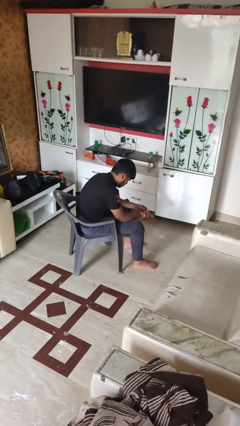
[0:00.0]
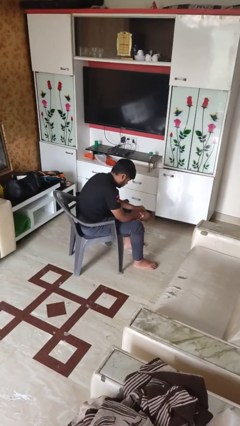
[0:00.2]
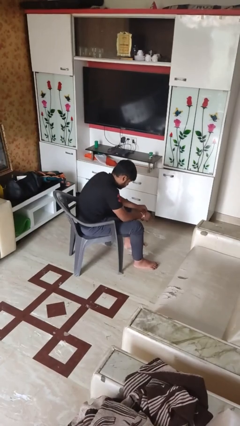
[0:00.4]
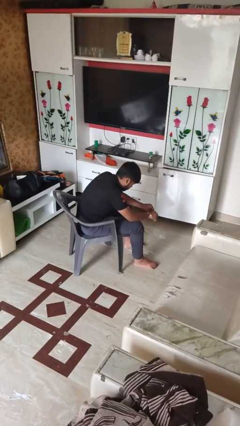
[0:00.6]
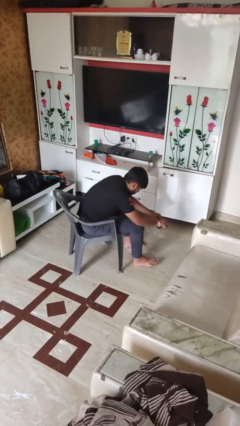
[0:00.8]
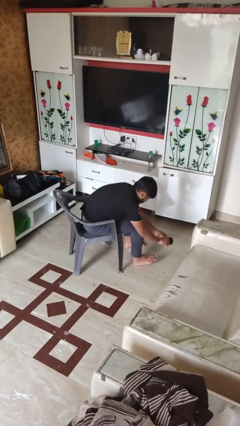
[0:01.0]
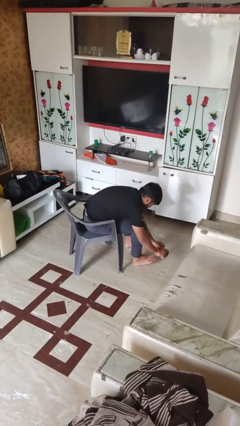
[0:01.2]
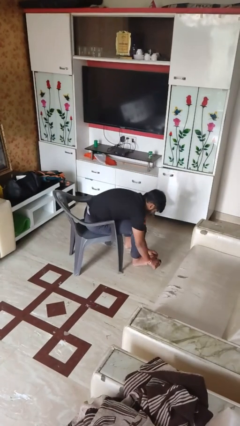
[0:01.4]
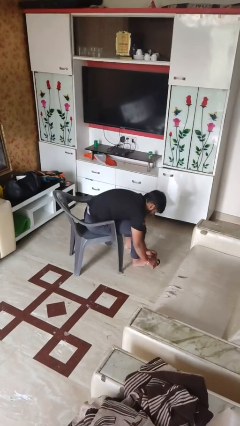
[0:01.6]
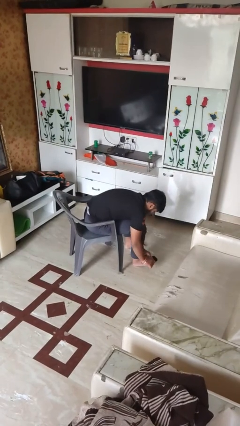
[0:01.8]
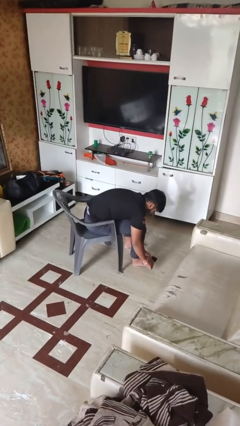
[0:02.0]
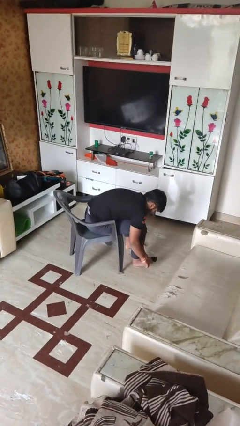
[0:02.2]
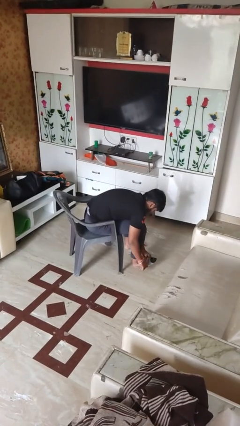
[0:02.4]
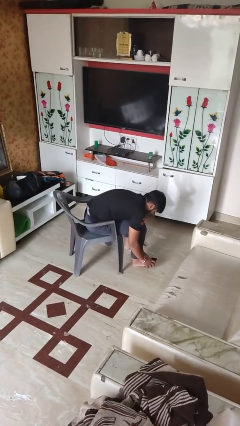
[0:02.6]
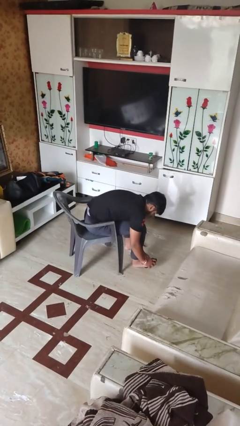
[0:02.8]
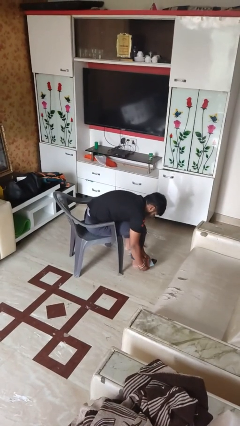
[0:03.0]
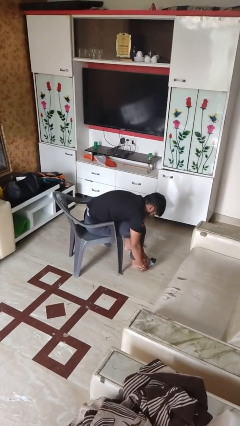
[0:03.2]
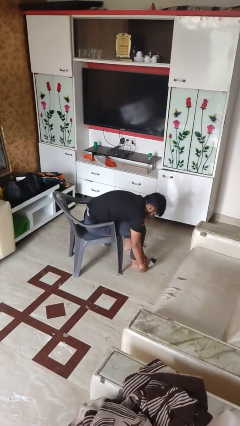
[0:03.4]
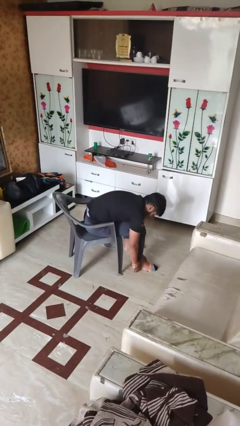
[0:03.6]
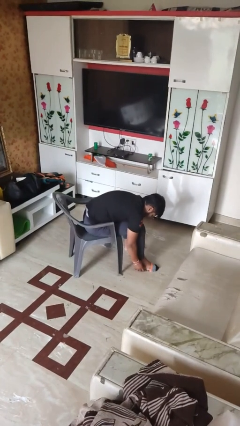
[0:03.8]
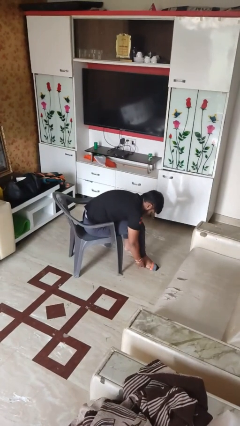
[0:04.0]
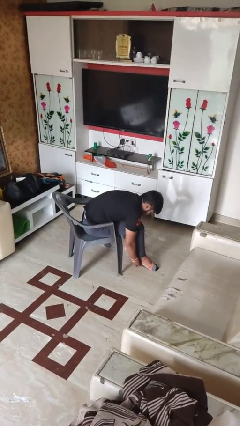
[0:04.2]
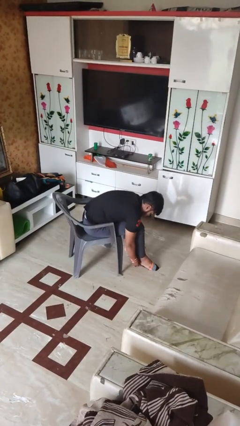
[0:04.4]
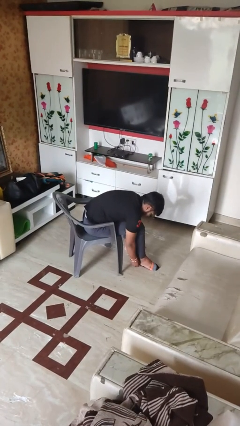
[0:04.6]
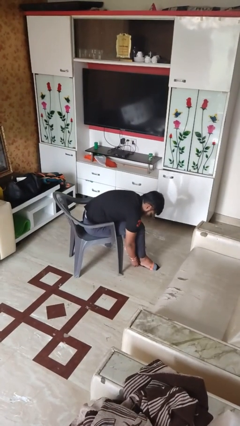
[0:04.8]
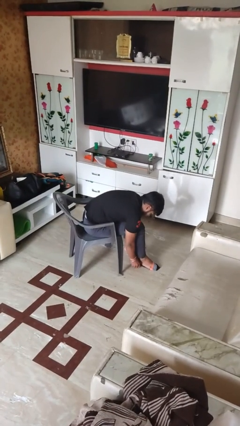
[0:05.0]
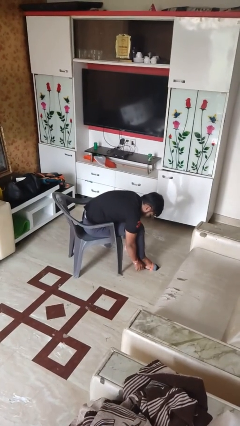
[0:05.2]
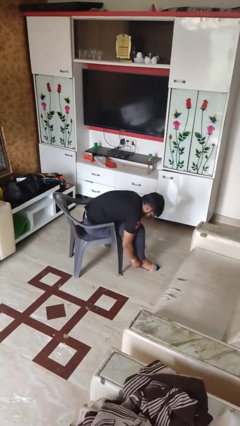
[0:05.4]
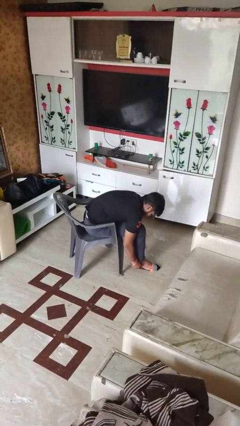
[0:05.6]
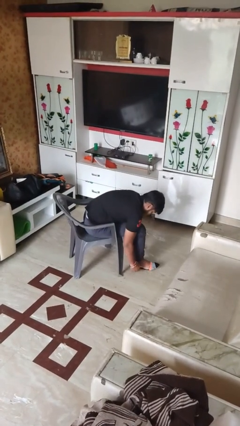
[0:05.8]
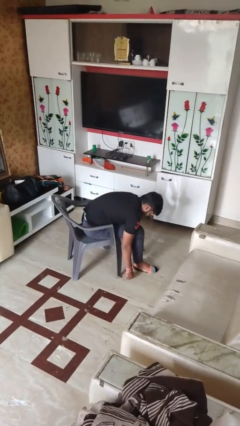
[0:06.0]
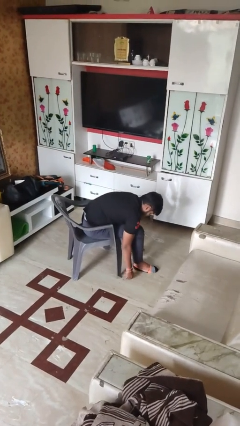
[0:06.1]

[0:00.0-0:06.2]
person puts on socks

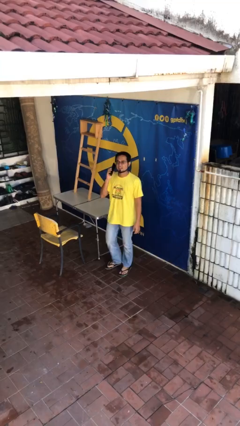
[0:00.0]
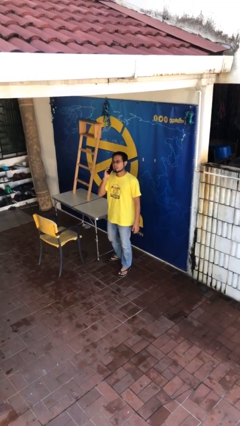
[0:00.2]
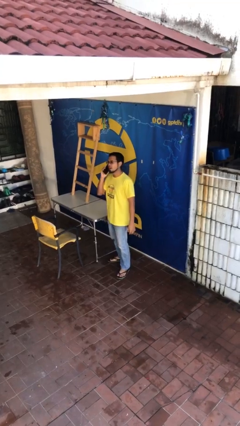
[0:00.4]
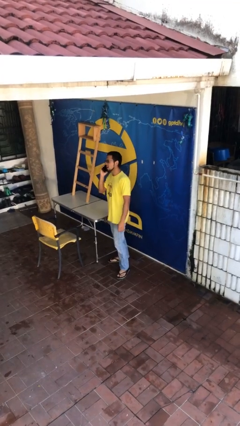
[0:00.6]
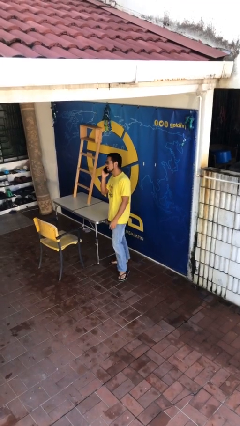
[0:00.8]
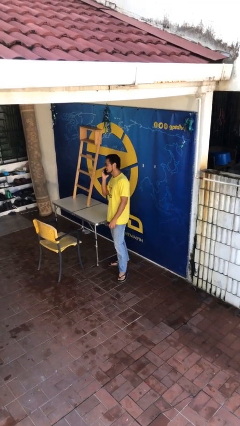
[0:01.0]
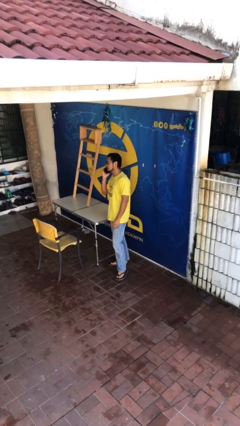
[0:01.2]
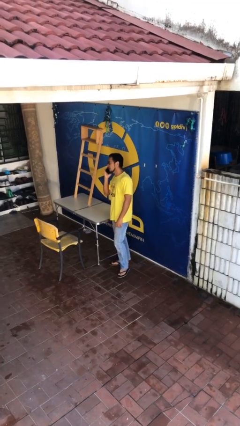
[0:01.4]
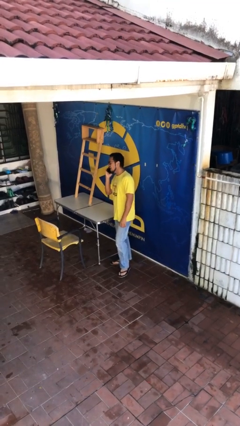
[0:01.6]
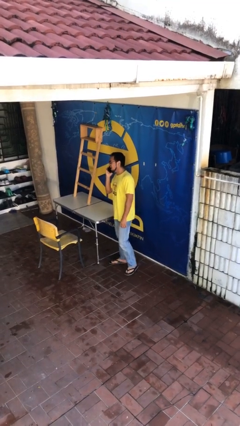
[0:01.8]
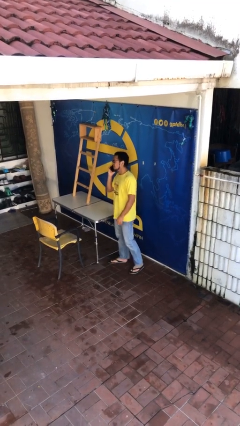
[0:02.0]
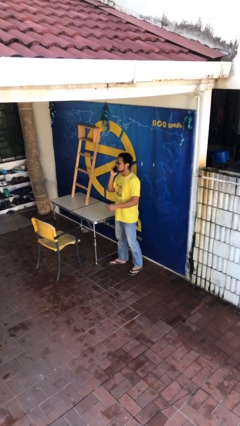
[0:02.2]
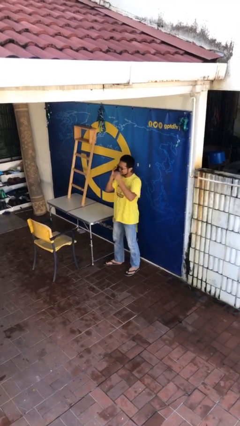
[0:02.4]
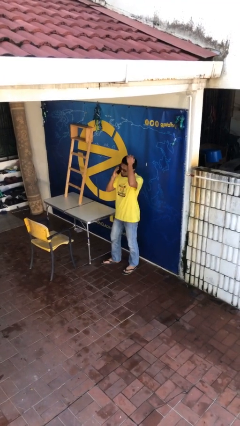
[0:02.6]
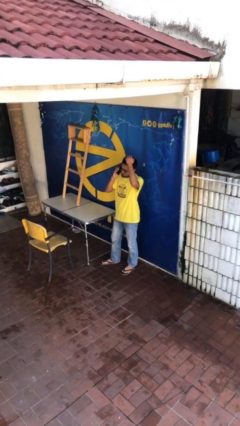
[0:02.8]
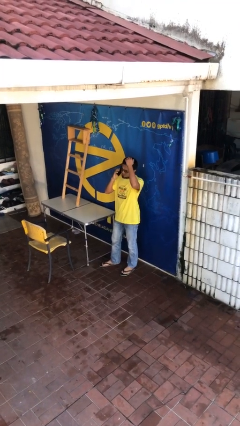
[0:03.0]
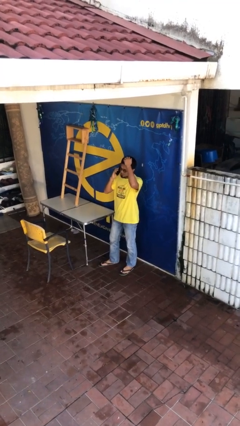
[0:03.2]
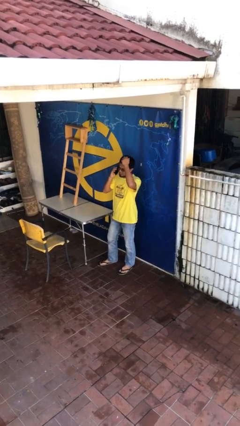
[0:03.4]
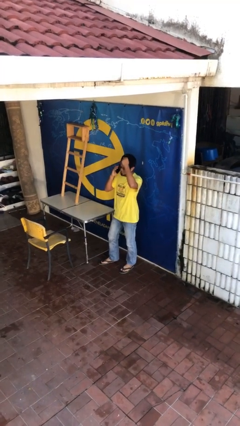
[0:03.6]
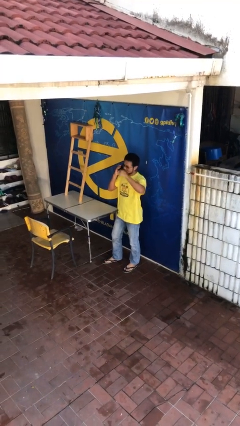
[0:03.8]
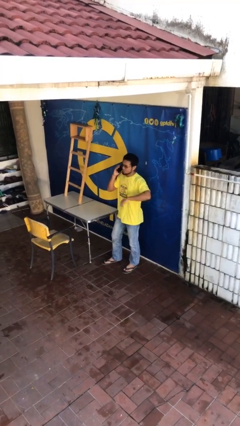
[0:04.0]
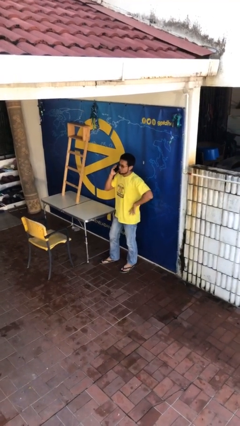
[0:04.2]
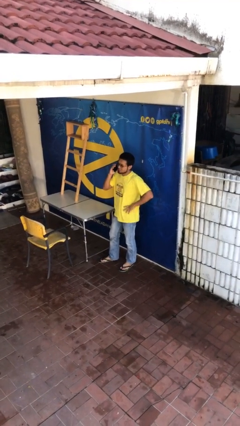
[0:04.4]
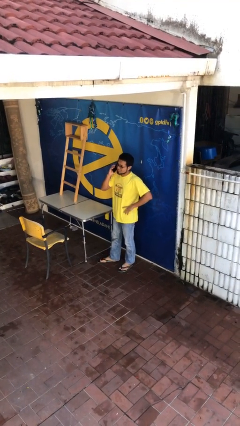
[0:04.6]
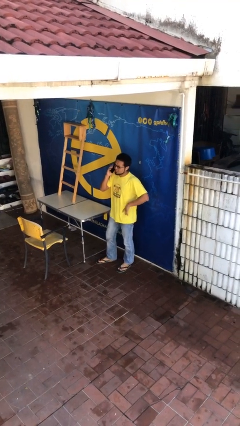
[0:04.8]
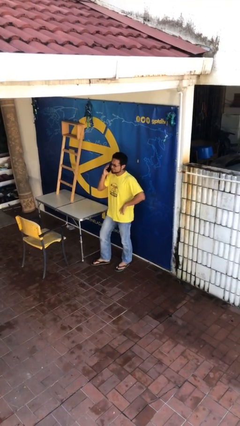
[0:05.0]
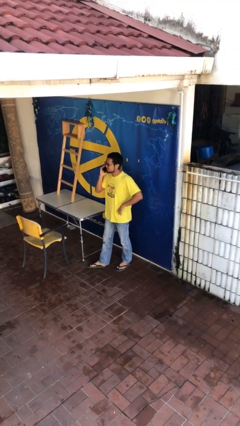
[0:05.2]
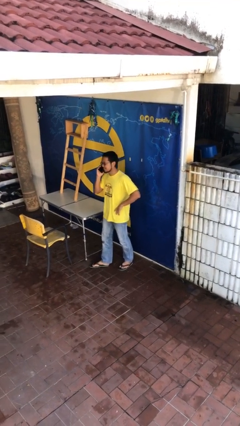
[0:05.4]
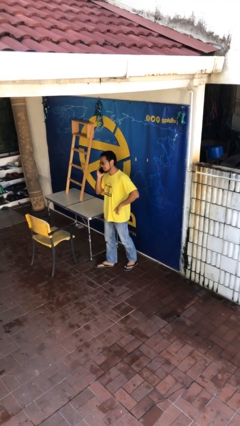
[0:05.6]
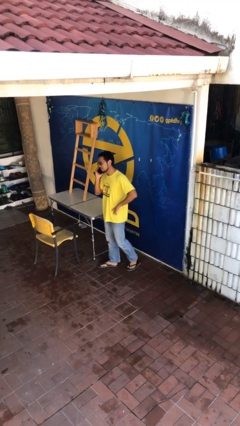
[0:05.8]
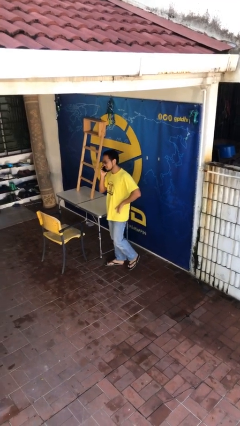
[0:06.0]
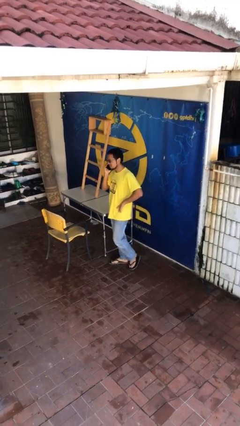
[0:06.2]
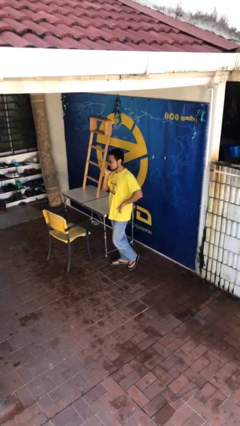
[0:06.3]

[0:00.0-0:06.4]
person talks on phone

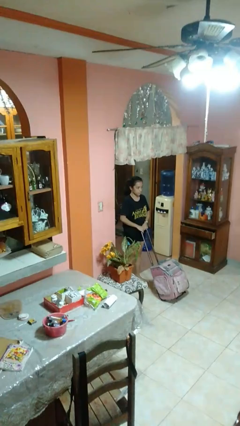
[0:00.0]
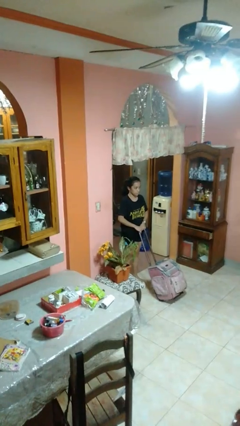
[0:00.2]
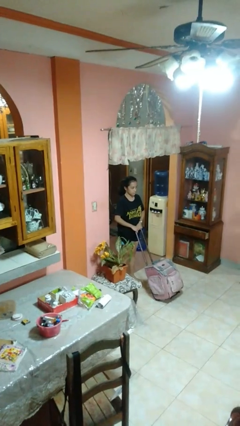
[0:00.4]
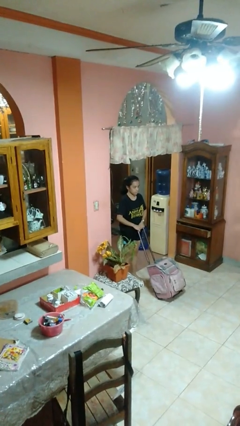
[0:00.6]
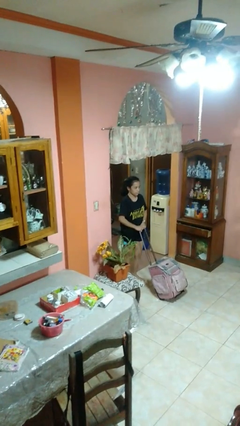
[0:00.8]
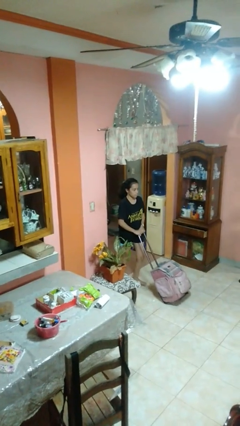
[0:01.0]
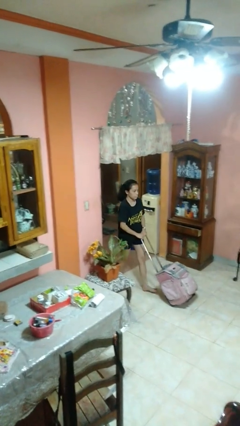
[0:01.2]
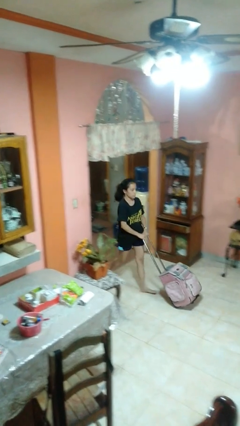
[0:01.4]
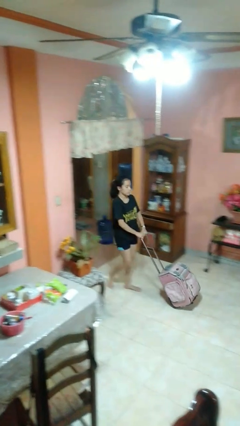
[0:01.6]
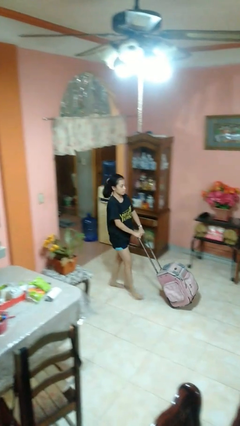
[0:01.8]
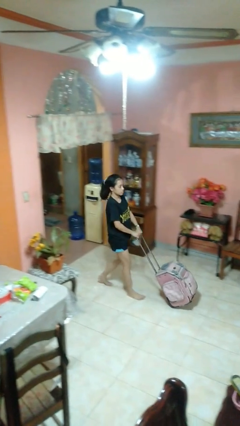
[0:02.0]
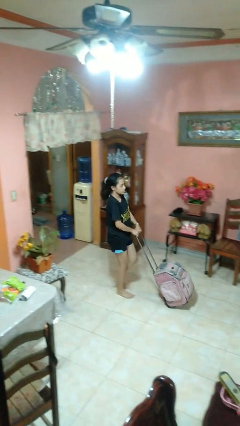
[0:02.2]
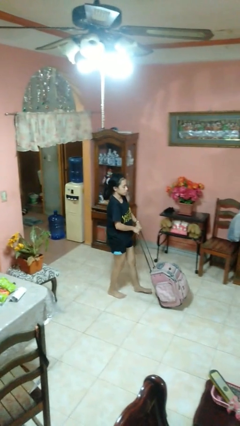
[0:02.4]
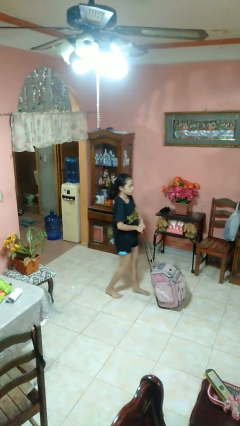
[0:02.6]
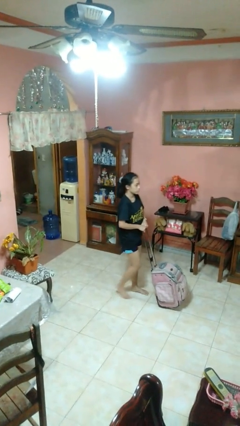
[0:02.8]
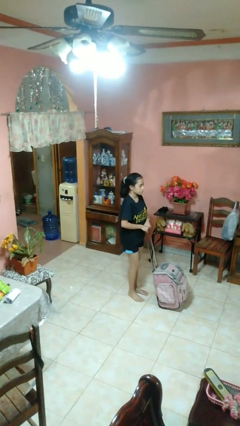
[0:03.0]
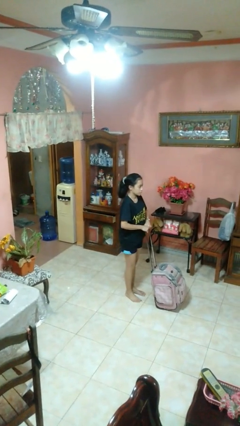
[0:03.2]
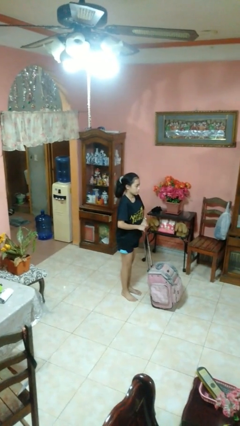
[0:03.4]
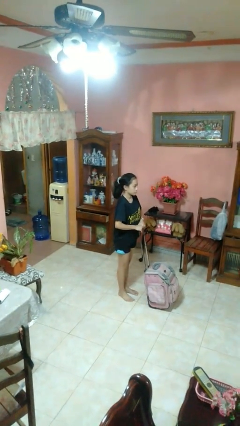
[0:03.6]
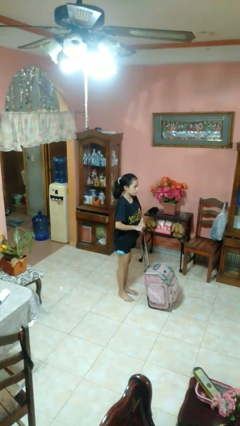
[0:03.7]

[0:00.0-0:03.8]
person pushes wheeled cart

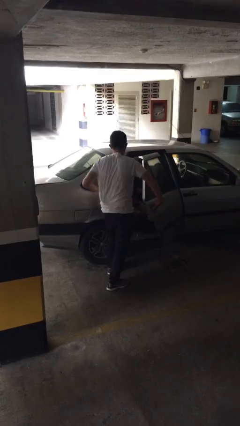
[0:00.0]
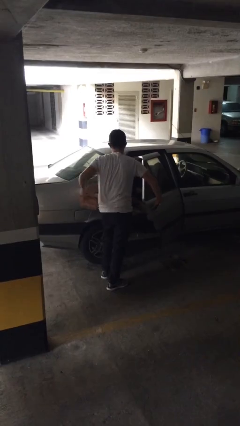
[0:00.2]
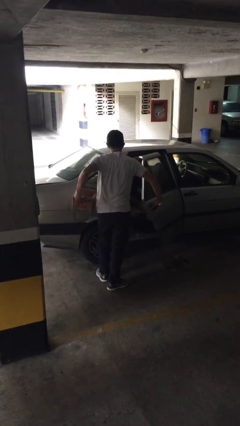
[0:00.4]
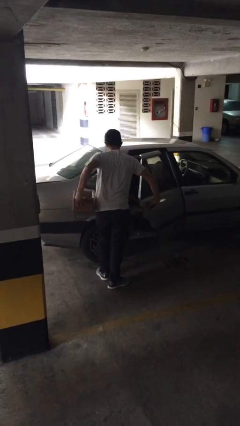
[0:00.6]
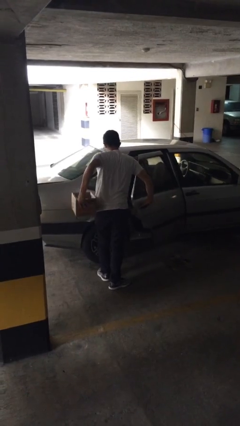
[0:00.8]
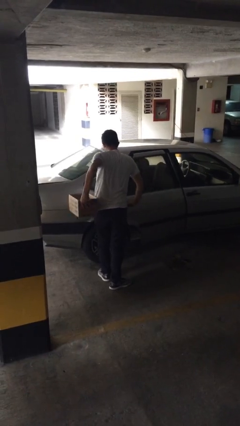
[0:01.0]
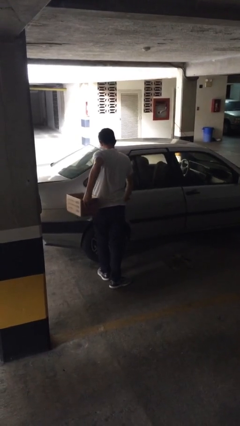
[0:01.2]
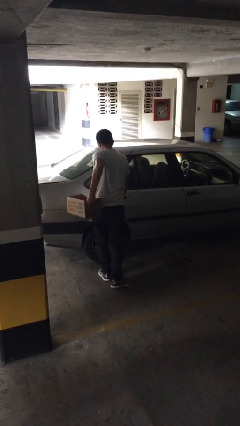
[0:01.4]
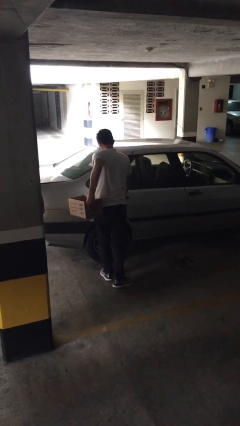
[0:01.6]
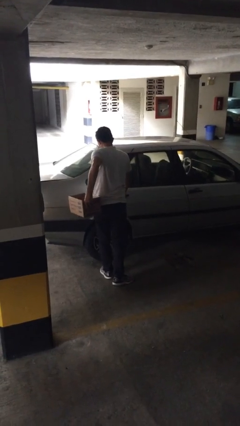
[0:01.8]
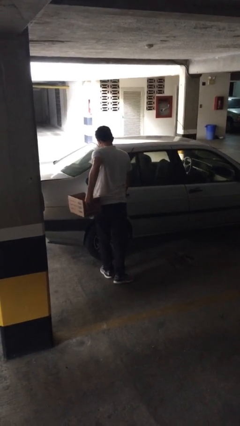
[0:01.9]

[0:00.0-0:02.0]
person closes car door
